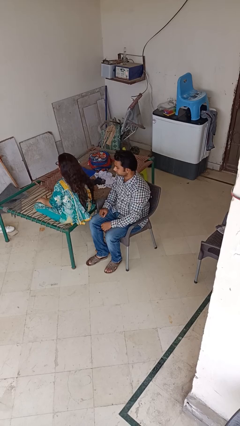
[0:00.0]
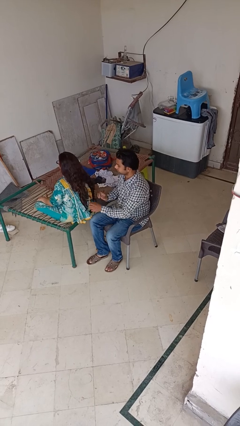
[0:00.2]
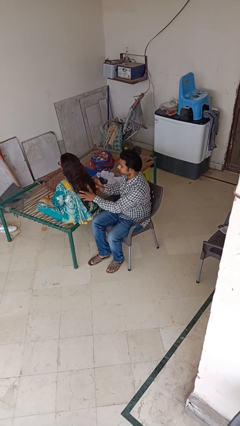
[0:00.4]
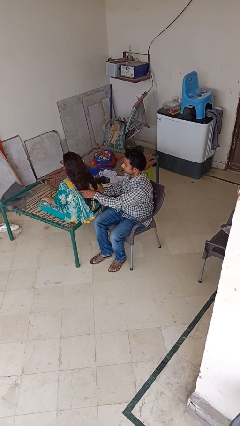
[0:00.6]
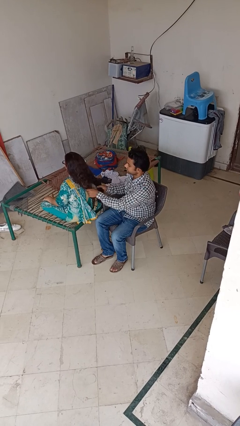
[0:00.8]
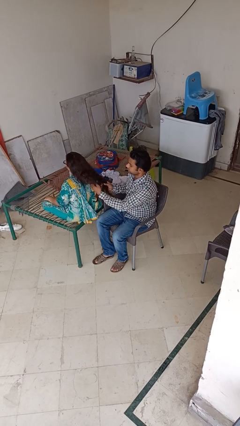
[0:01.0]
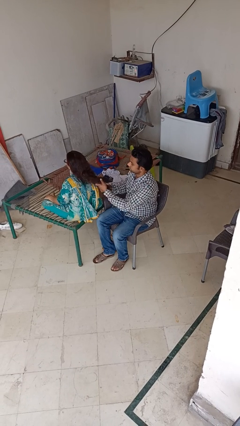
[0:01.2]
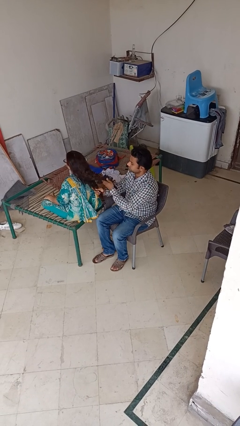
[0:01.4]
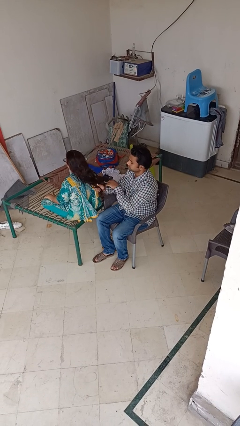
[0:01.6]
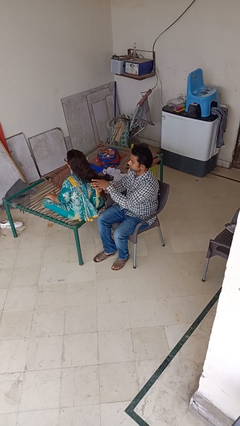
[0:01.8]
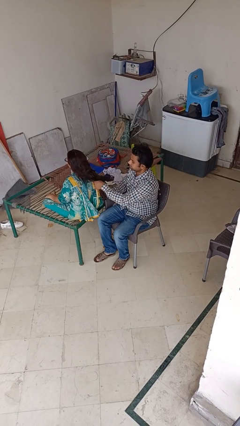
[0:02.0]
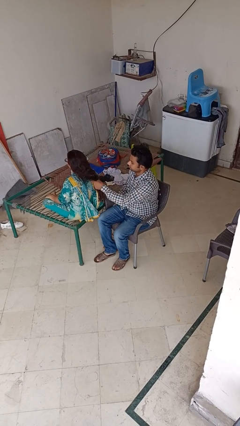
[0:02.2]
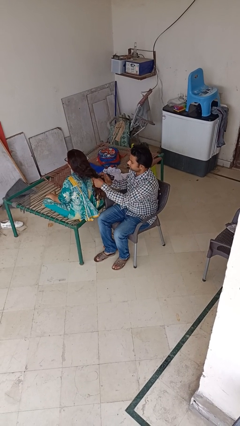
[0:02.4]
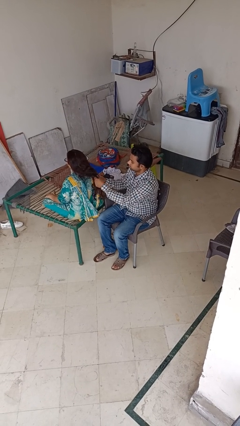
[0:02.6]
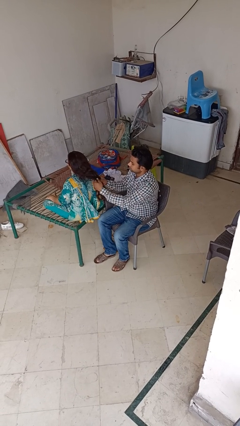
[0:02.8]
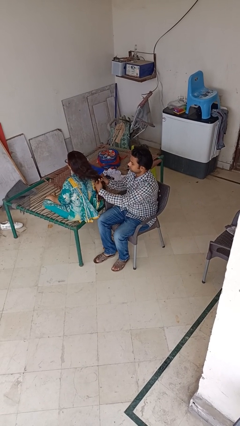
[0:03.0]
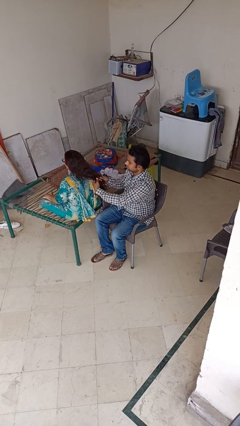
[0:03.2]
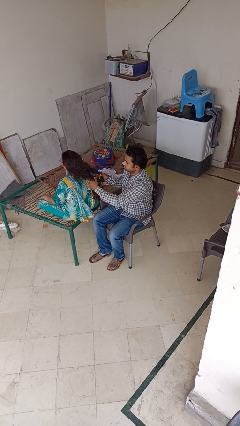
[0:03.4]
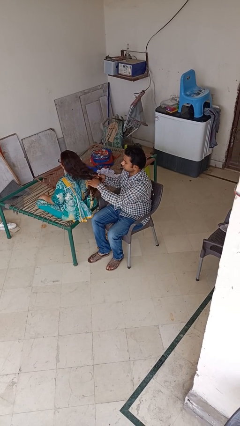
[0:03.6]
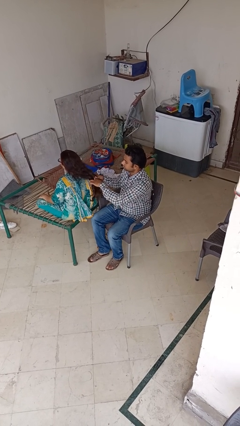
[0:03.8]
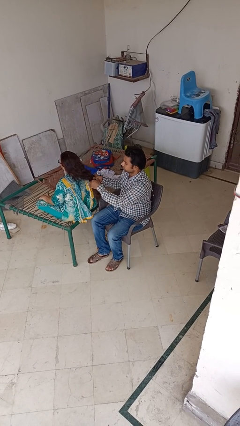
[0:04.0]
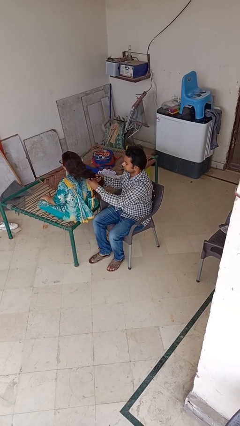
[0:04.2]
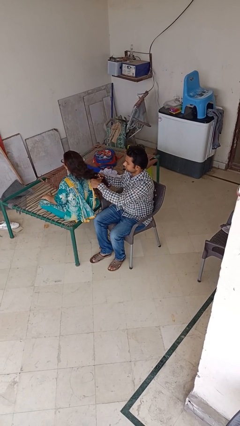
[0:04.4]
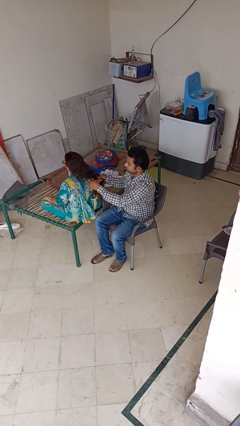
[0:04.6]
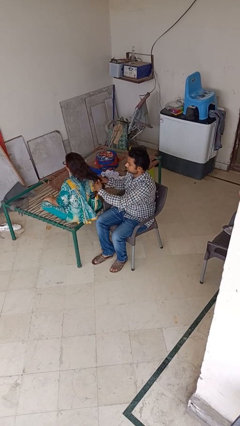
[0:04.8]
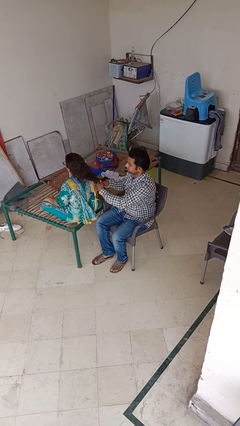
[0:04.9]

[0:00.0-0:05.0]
person braids hair of person

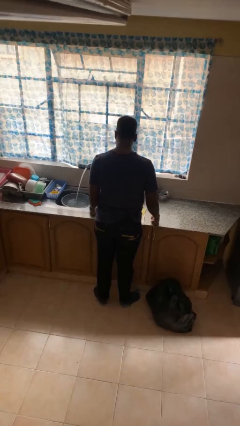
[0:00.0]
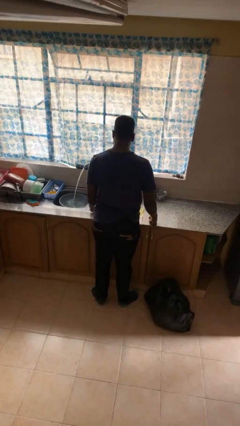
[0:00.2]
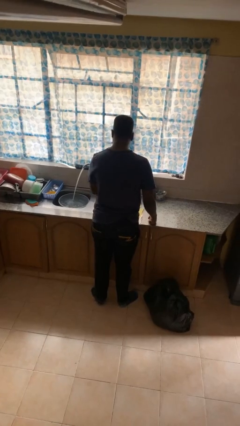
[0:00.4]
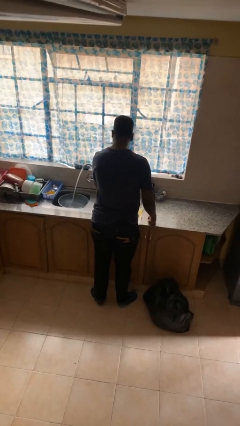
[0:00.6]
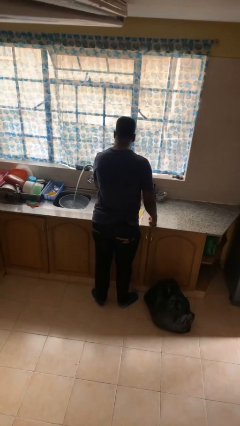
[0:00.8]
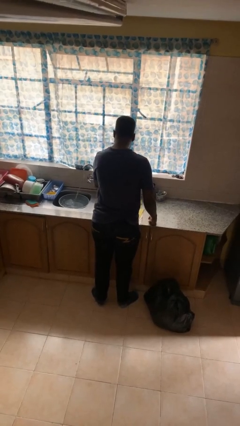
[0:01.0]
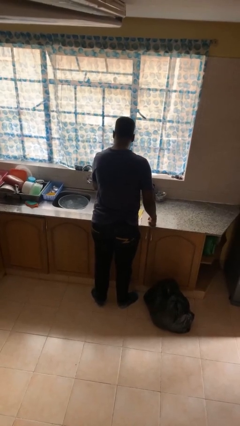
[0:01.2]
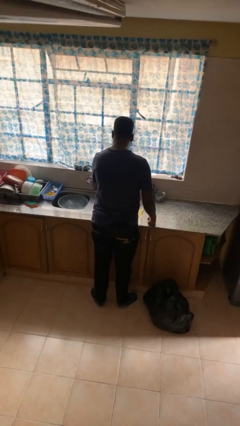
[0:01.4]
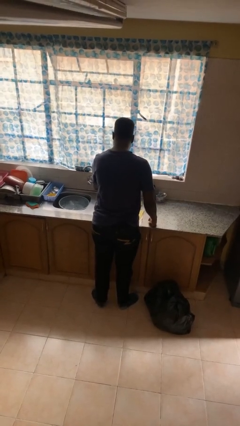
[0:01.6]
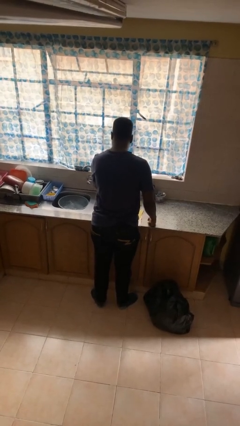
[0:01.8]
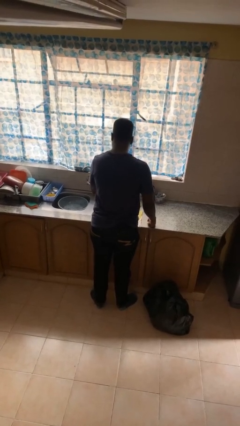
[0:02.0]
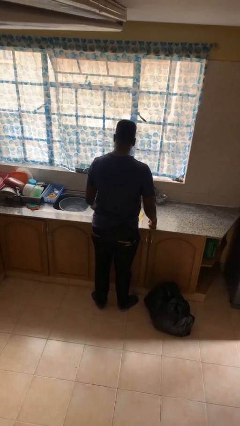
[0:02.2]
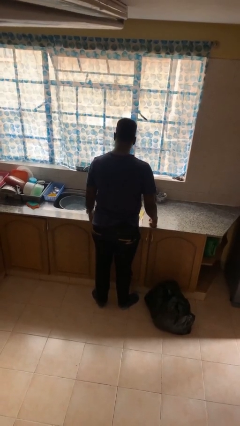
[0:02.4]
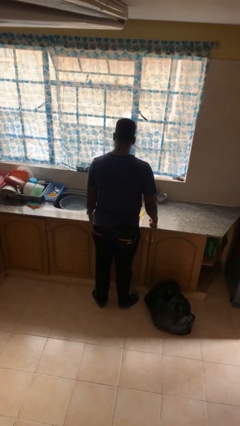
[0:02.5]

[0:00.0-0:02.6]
person turns off faucet

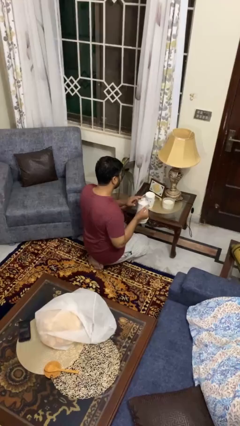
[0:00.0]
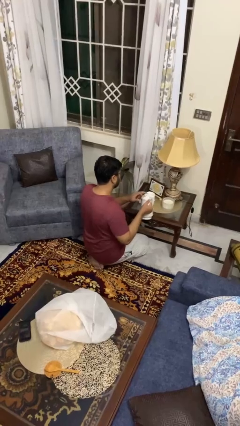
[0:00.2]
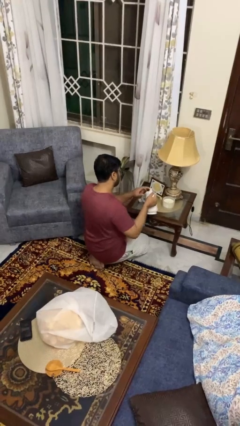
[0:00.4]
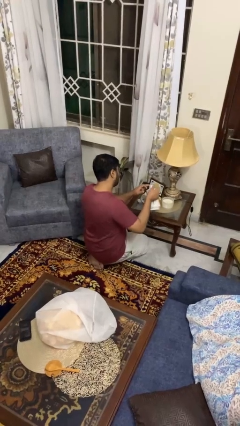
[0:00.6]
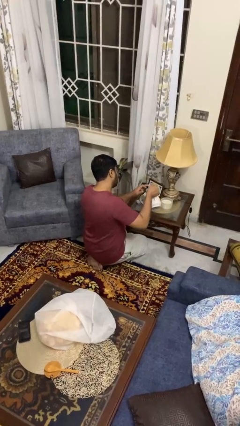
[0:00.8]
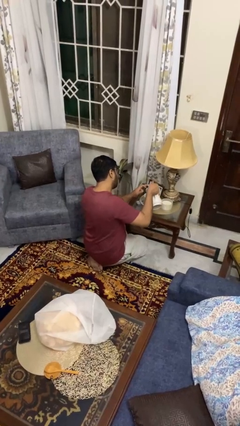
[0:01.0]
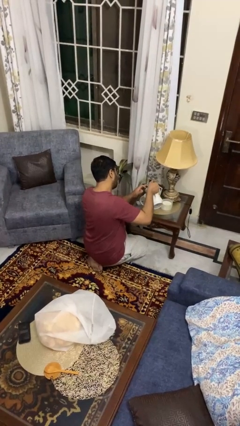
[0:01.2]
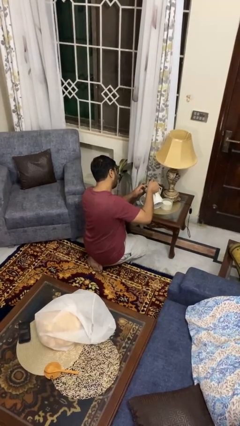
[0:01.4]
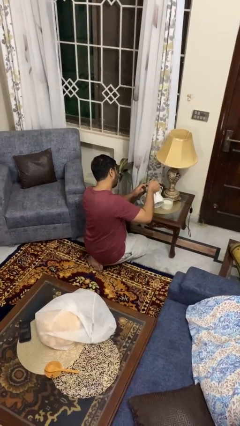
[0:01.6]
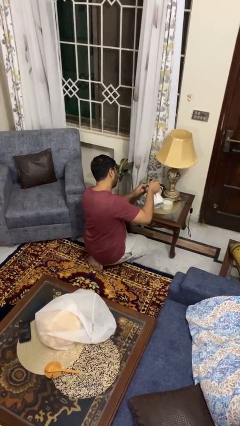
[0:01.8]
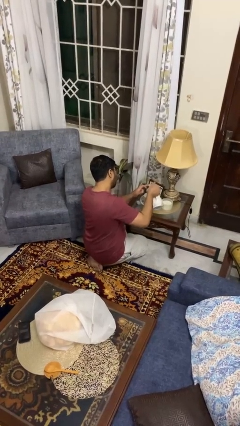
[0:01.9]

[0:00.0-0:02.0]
person pours coffee into mug

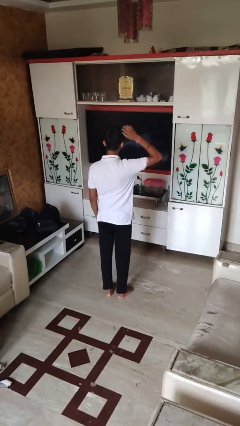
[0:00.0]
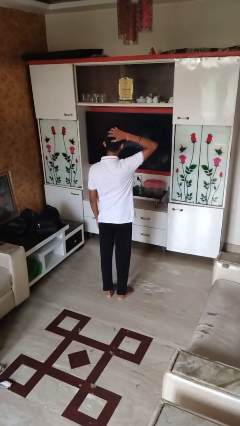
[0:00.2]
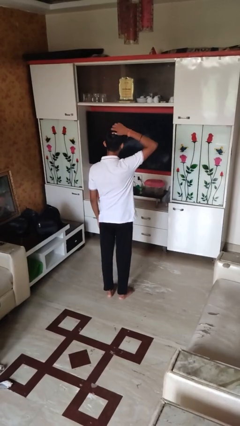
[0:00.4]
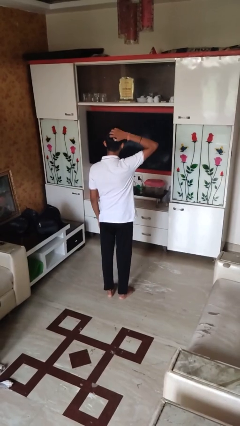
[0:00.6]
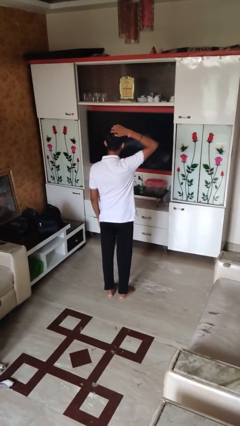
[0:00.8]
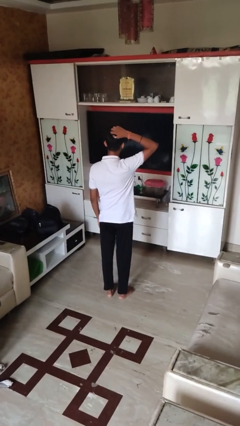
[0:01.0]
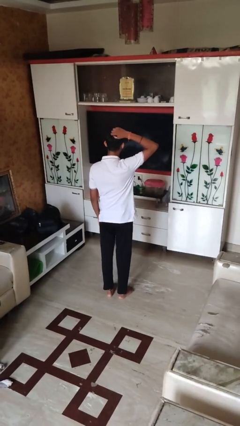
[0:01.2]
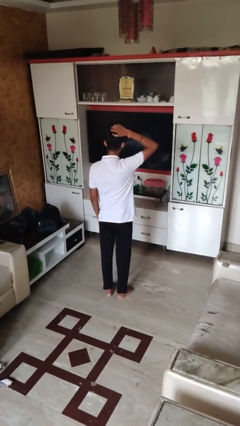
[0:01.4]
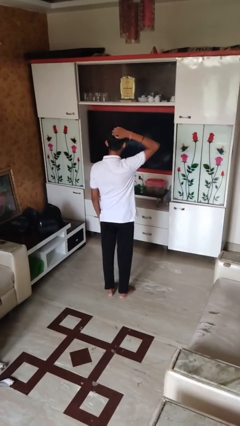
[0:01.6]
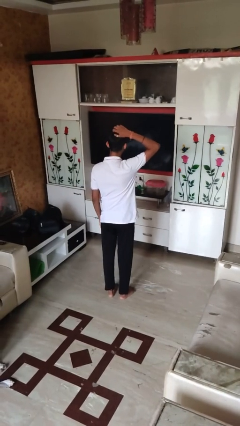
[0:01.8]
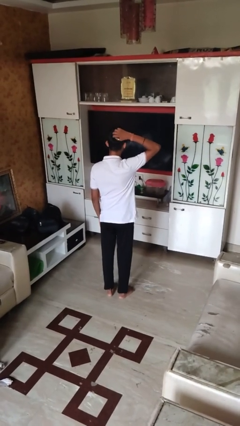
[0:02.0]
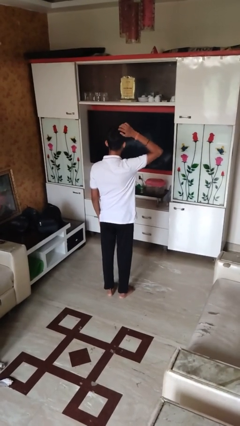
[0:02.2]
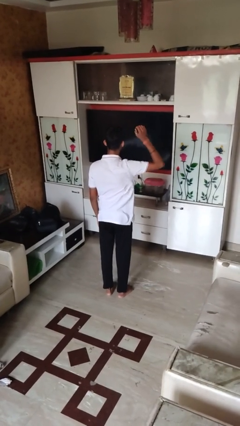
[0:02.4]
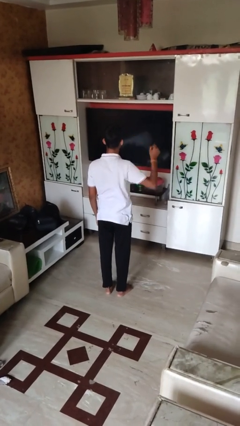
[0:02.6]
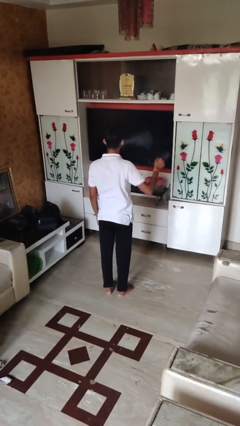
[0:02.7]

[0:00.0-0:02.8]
person scratches face

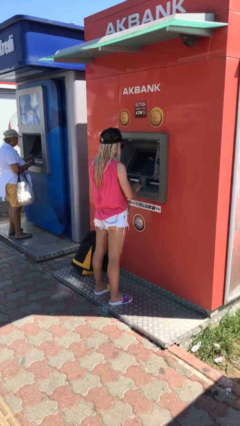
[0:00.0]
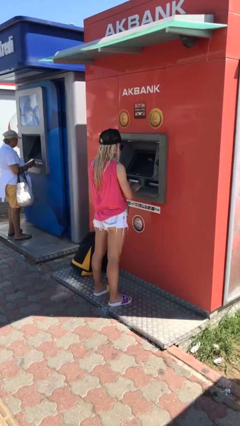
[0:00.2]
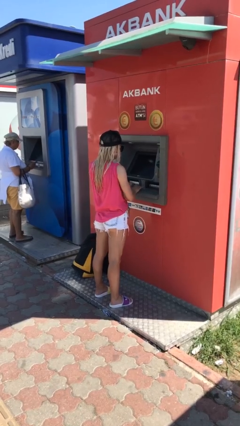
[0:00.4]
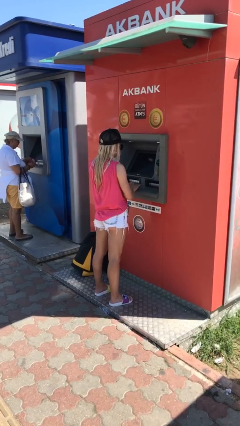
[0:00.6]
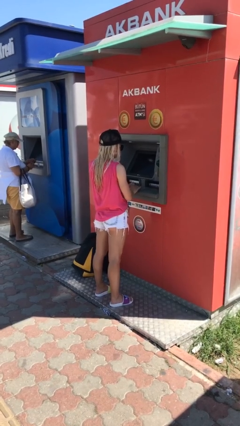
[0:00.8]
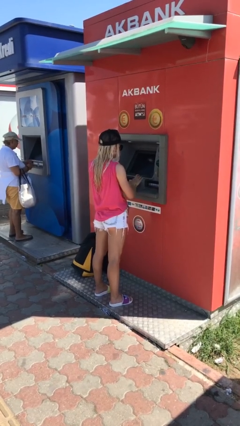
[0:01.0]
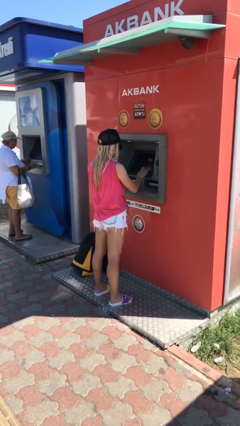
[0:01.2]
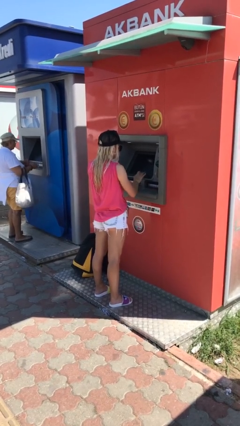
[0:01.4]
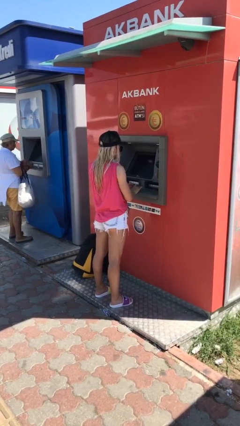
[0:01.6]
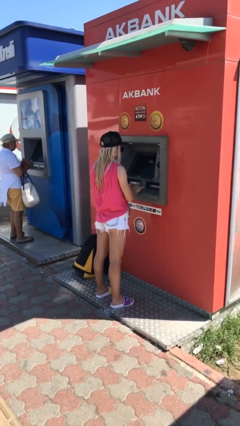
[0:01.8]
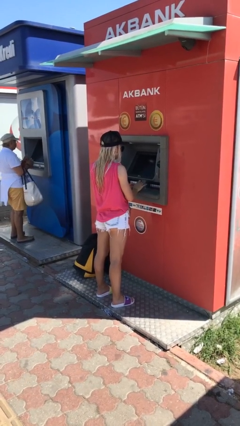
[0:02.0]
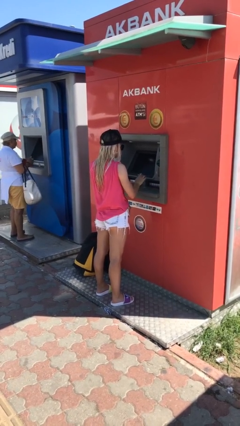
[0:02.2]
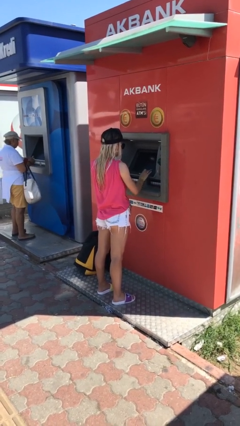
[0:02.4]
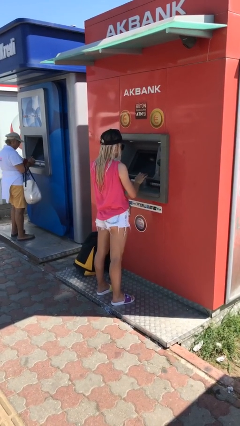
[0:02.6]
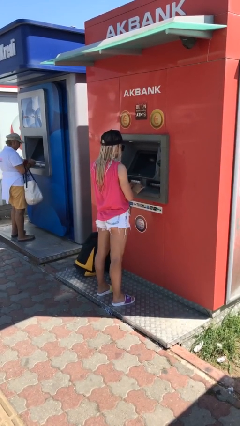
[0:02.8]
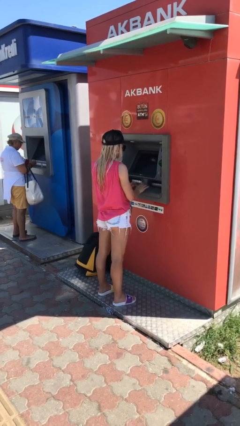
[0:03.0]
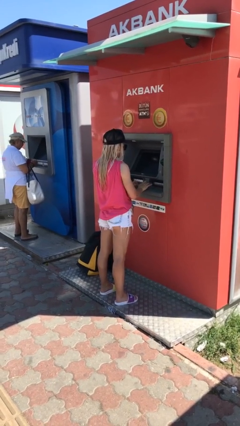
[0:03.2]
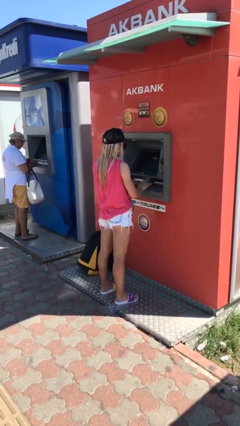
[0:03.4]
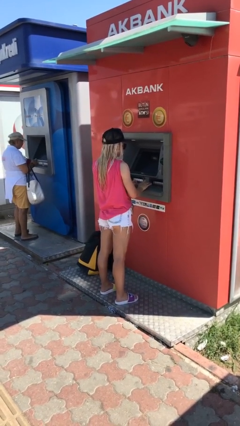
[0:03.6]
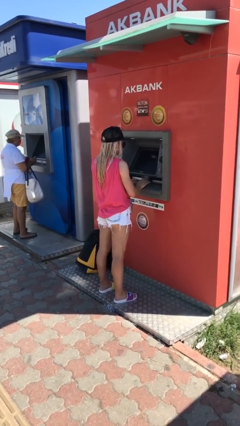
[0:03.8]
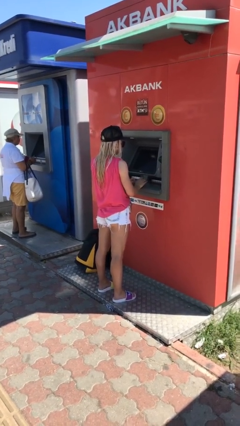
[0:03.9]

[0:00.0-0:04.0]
person purchases from machine

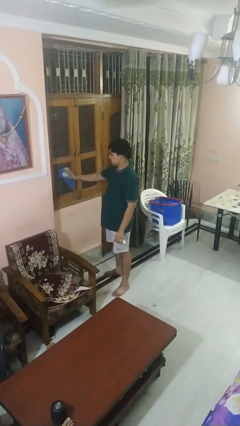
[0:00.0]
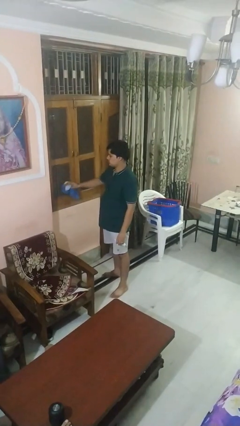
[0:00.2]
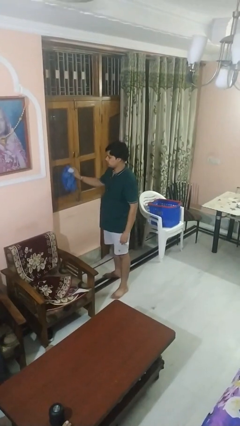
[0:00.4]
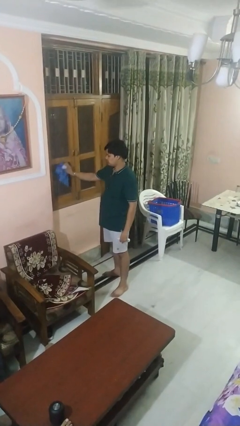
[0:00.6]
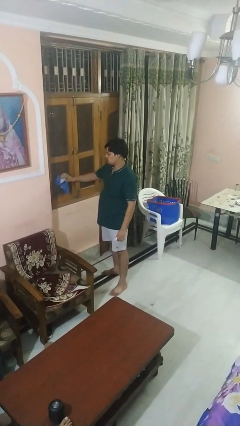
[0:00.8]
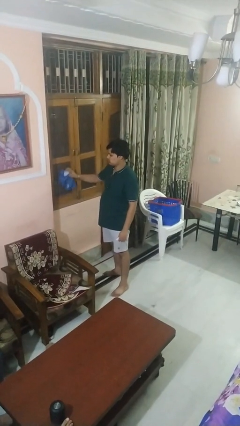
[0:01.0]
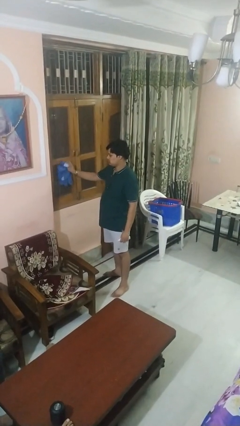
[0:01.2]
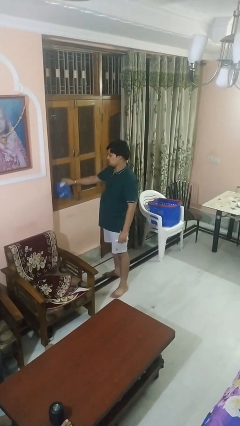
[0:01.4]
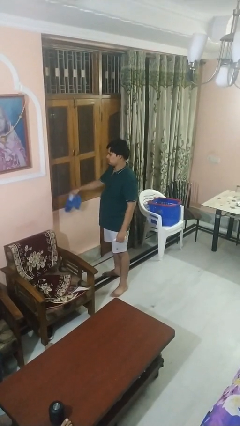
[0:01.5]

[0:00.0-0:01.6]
person washes window
